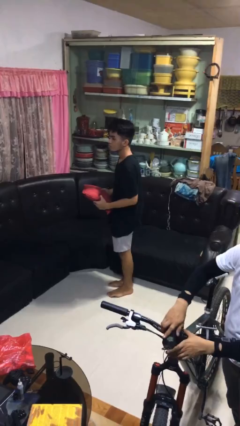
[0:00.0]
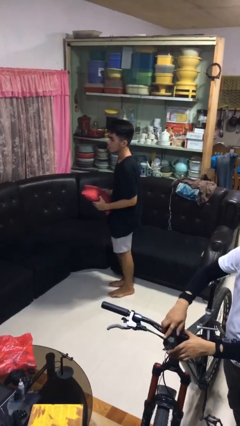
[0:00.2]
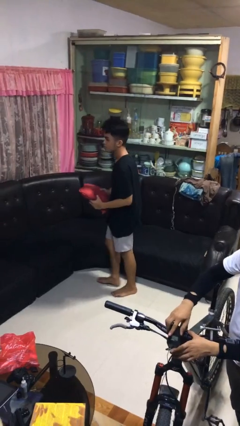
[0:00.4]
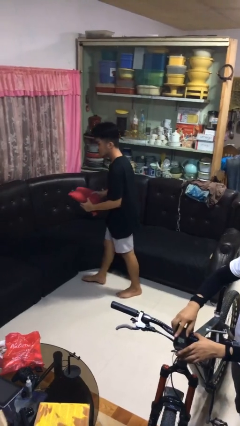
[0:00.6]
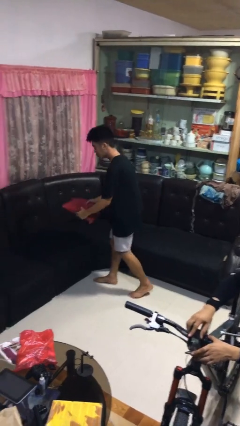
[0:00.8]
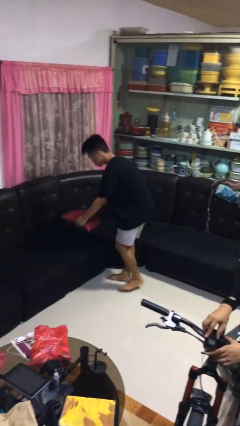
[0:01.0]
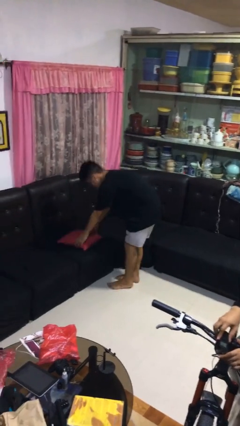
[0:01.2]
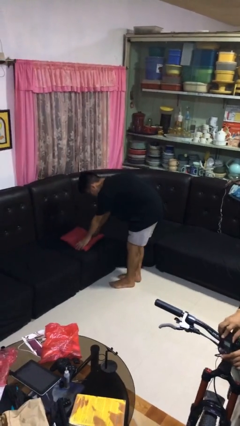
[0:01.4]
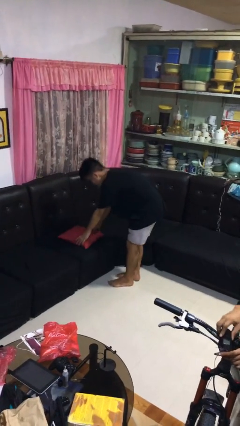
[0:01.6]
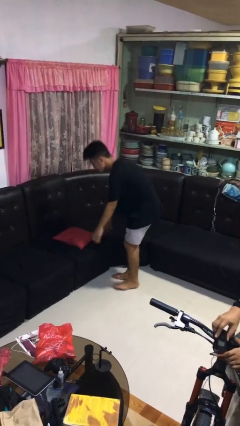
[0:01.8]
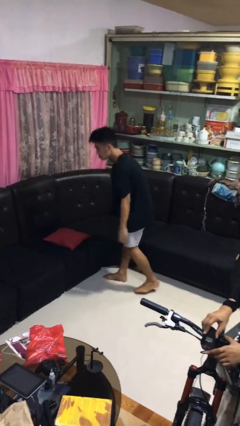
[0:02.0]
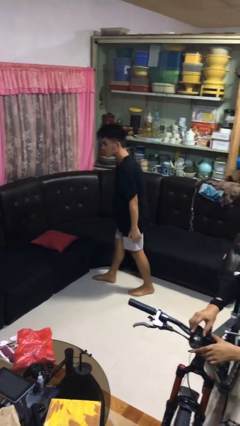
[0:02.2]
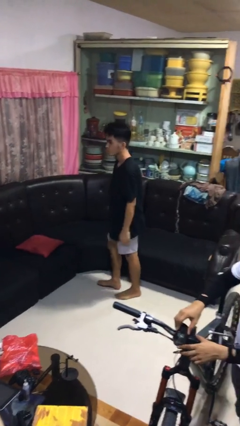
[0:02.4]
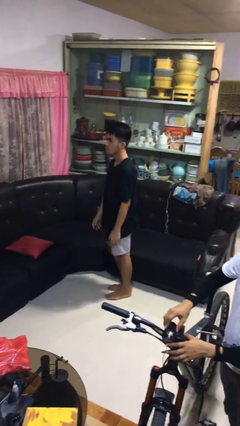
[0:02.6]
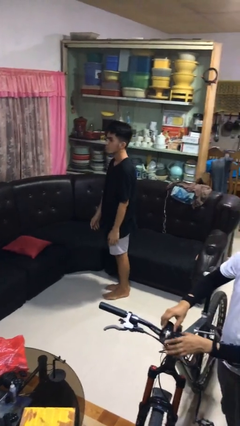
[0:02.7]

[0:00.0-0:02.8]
person puts down object on couch

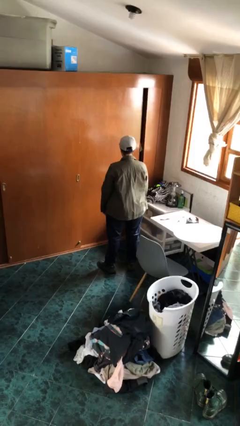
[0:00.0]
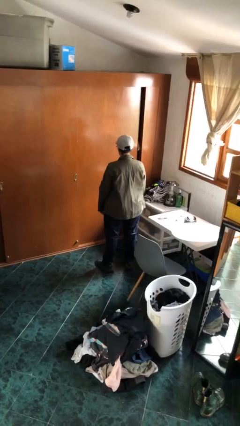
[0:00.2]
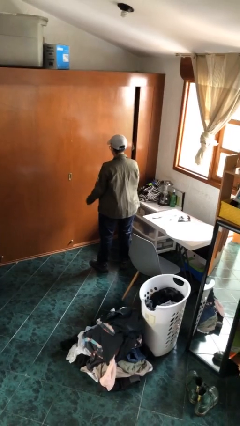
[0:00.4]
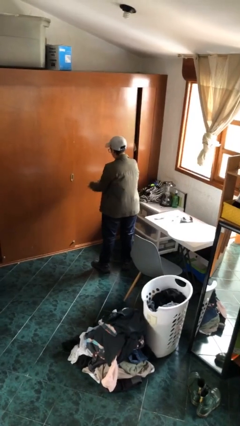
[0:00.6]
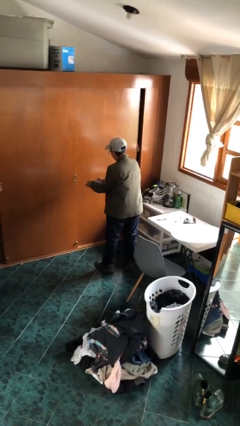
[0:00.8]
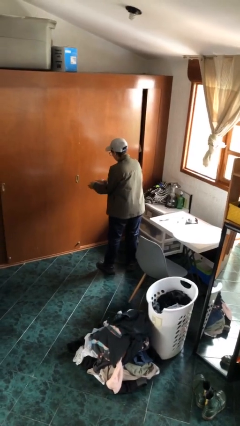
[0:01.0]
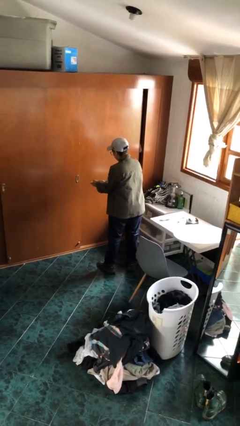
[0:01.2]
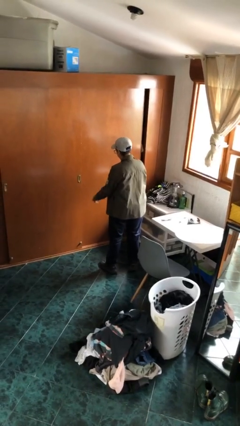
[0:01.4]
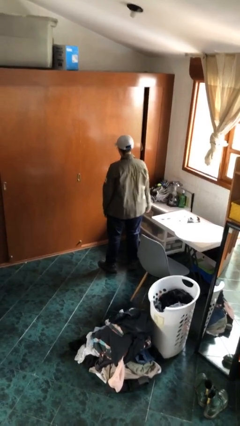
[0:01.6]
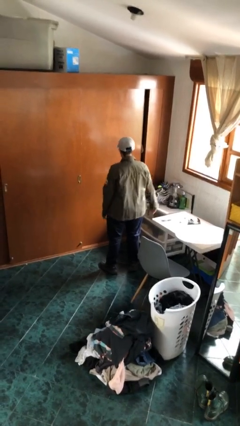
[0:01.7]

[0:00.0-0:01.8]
person claps hands

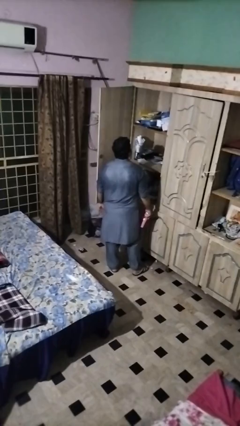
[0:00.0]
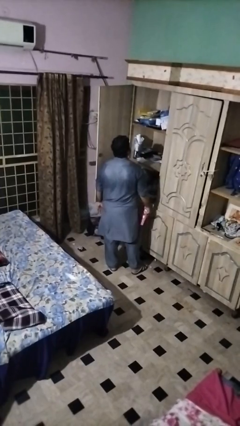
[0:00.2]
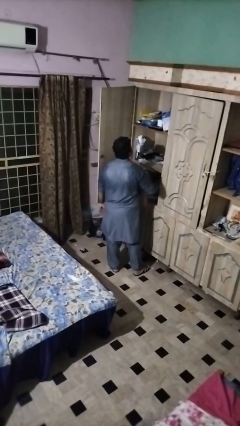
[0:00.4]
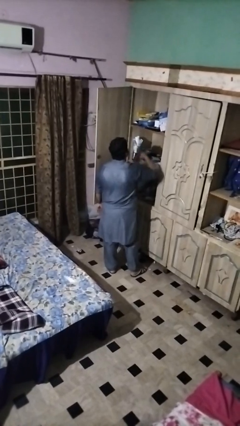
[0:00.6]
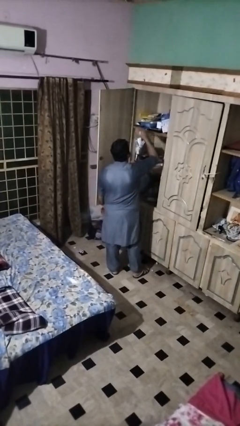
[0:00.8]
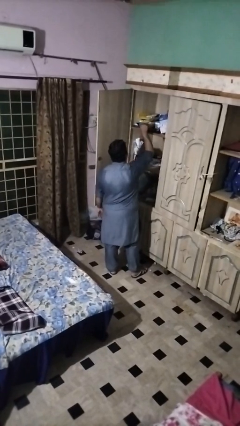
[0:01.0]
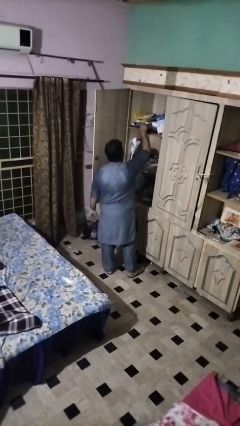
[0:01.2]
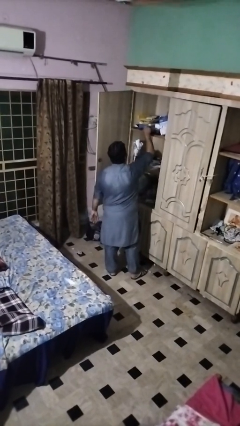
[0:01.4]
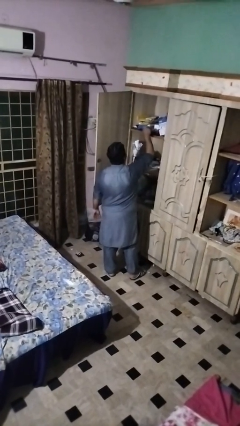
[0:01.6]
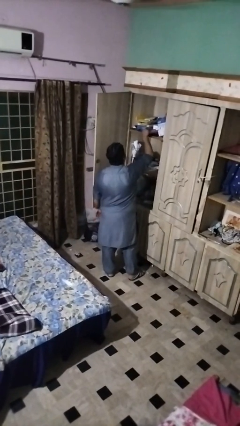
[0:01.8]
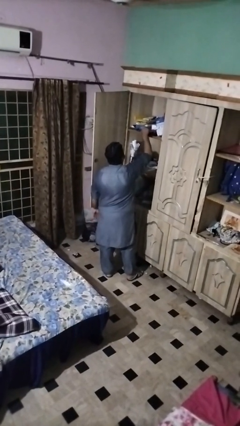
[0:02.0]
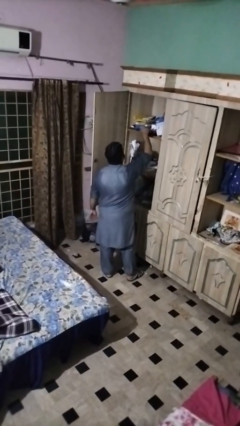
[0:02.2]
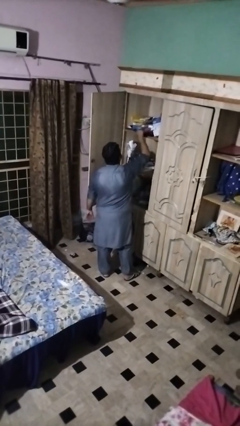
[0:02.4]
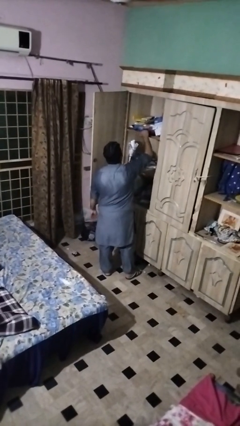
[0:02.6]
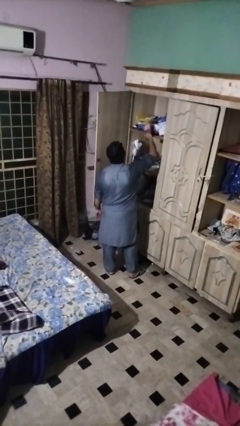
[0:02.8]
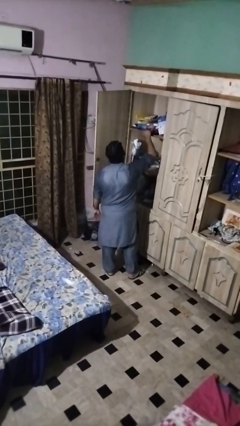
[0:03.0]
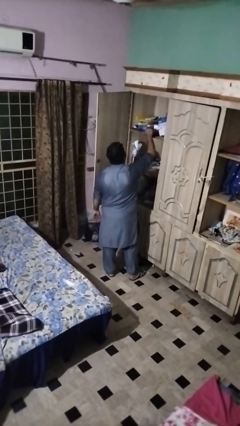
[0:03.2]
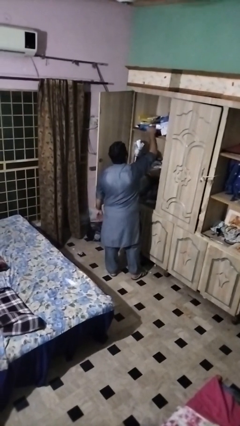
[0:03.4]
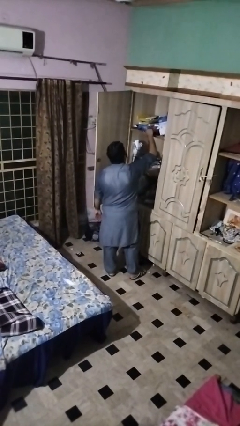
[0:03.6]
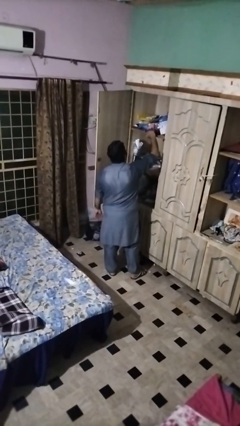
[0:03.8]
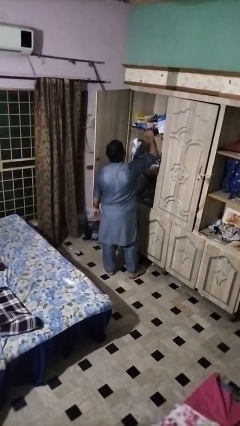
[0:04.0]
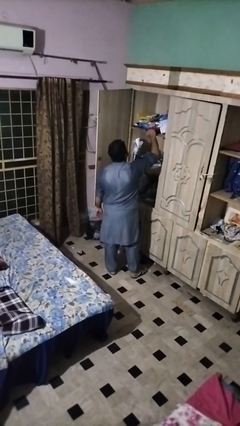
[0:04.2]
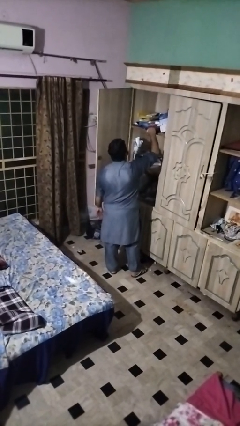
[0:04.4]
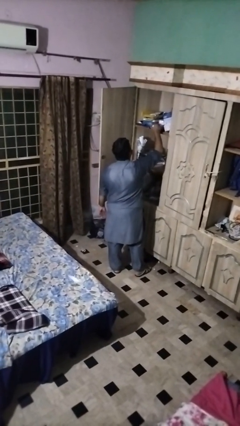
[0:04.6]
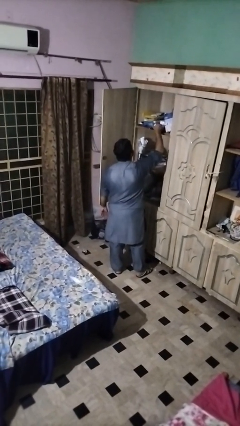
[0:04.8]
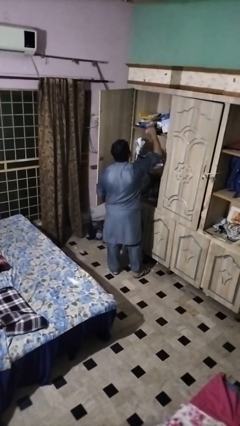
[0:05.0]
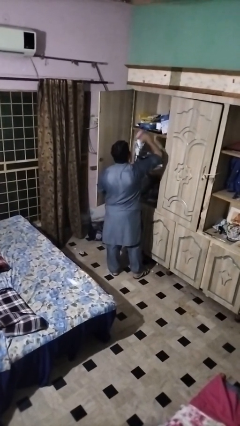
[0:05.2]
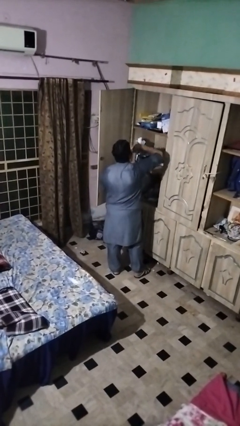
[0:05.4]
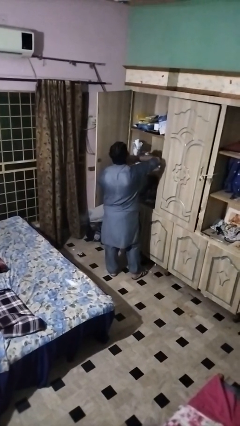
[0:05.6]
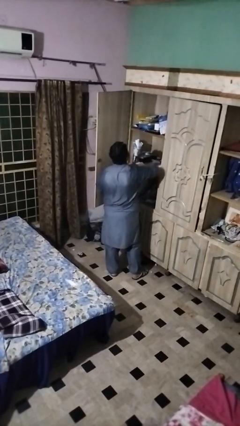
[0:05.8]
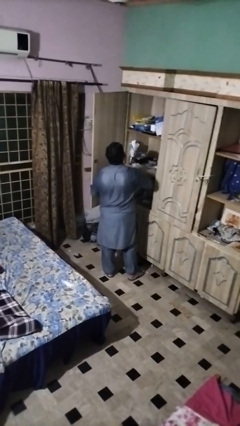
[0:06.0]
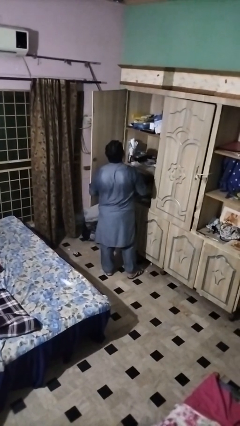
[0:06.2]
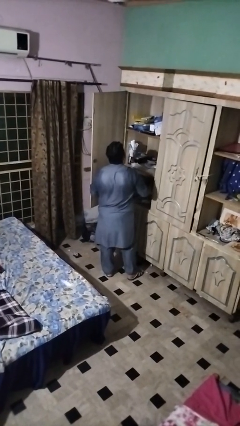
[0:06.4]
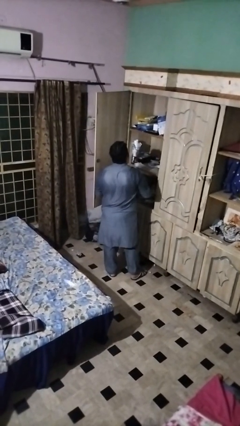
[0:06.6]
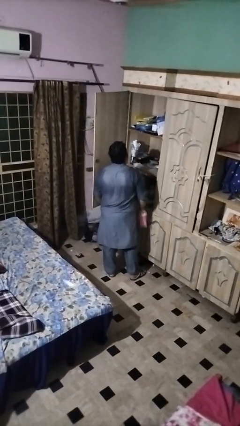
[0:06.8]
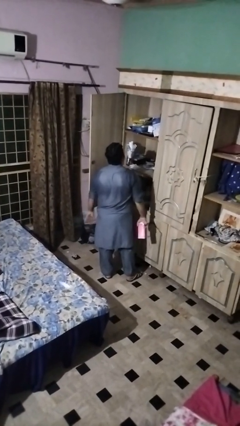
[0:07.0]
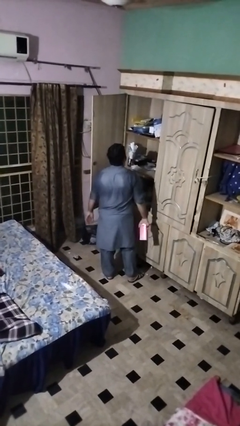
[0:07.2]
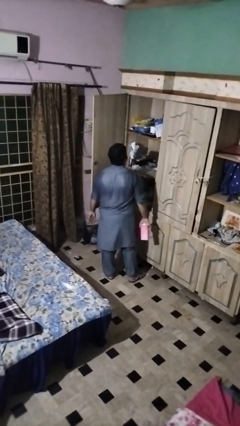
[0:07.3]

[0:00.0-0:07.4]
person dusts furniture

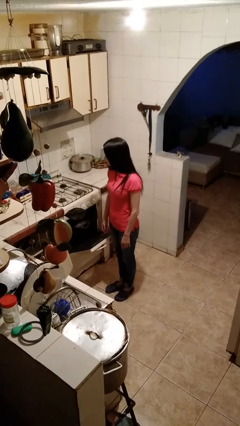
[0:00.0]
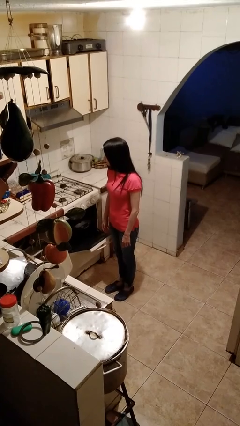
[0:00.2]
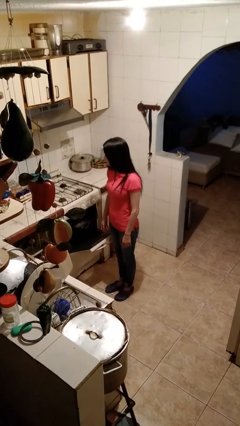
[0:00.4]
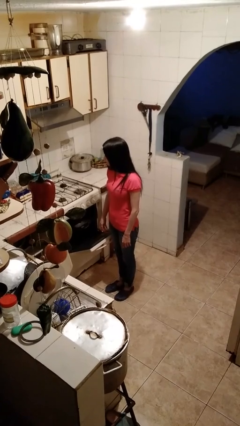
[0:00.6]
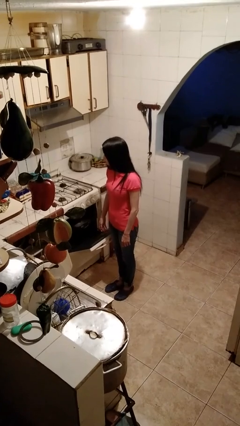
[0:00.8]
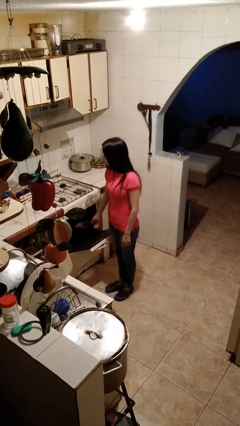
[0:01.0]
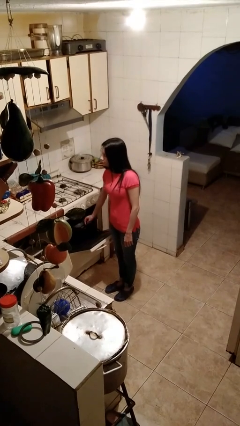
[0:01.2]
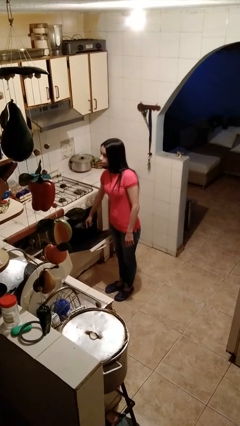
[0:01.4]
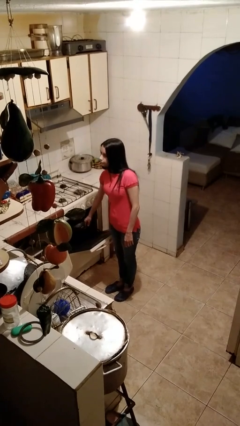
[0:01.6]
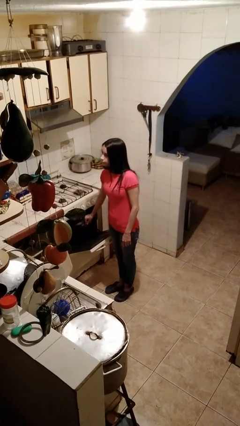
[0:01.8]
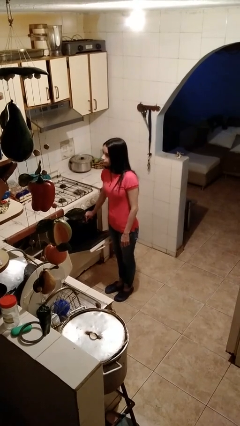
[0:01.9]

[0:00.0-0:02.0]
person takes object from oven

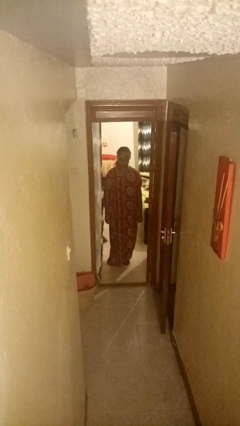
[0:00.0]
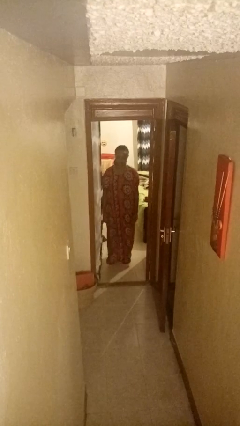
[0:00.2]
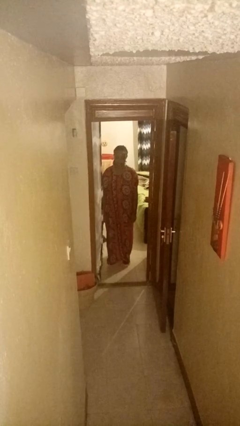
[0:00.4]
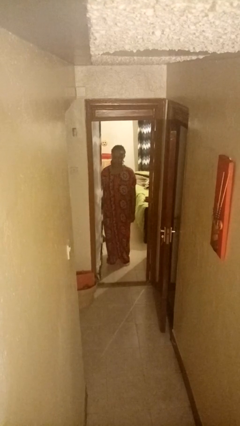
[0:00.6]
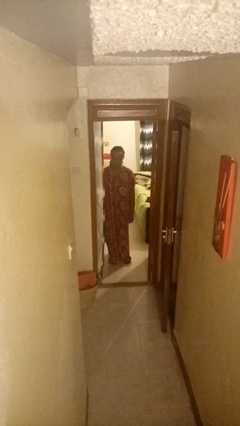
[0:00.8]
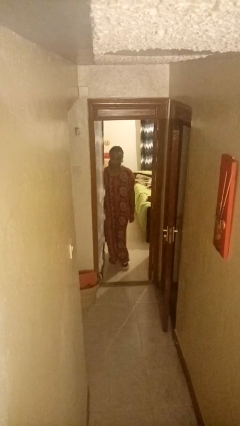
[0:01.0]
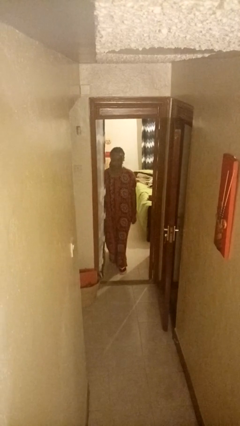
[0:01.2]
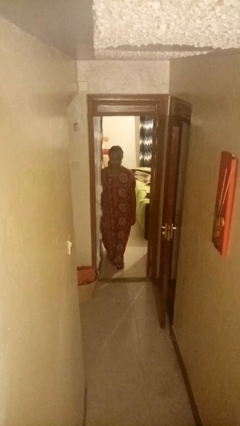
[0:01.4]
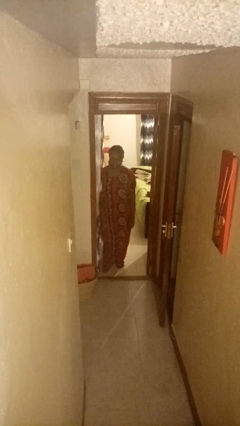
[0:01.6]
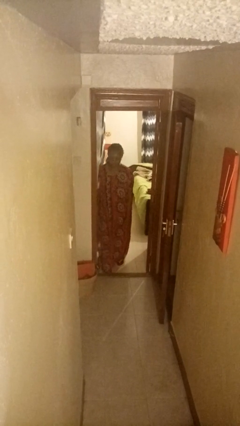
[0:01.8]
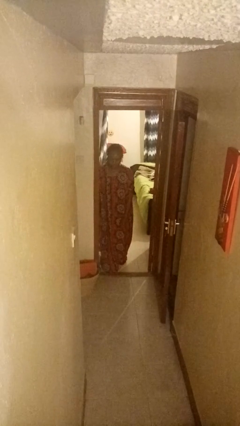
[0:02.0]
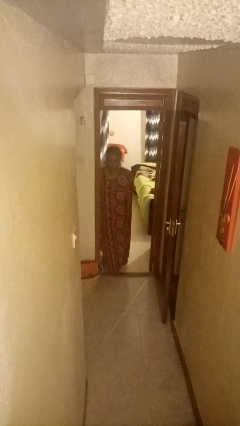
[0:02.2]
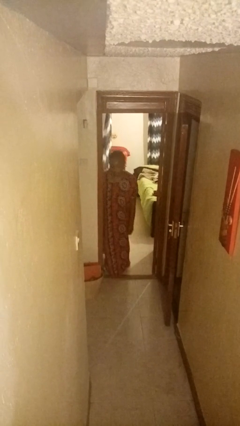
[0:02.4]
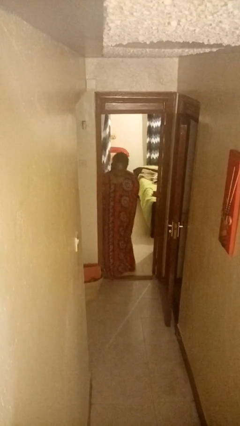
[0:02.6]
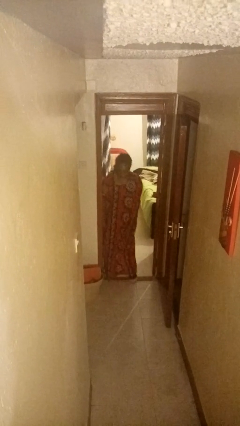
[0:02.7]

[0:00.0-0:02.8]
person bumps into wall

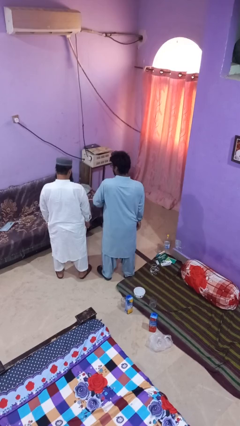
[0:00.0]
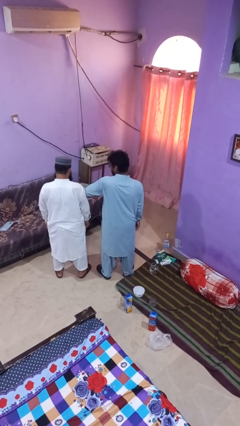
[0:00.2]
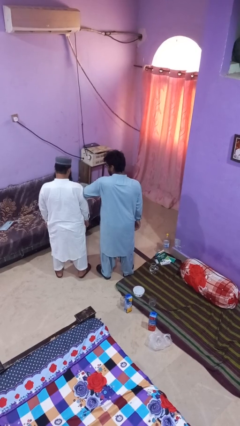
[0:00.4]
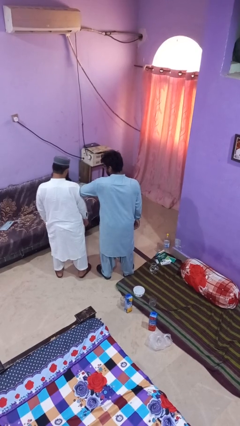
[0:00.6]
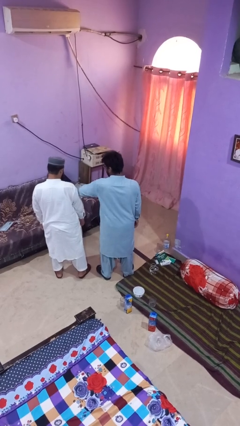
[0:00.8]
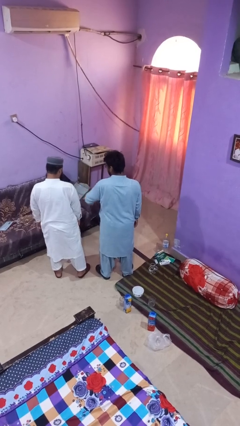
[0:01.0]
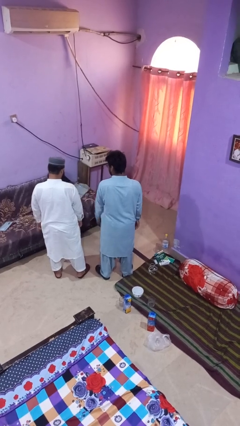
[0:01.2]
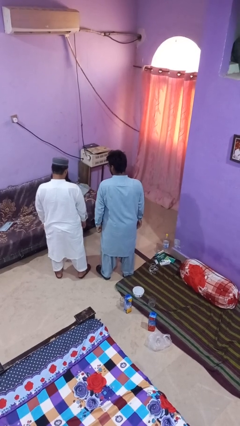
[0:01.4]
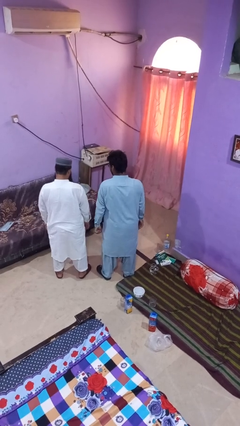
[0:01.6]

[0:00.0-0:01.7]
person nudges person with elbow
